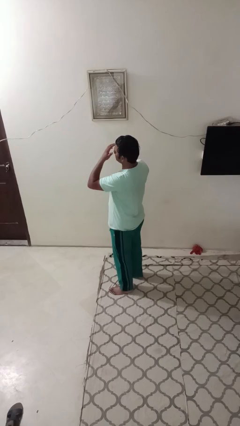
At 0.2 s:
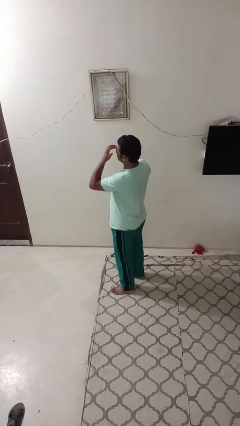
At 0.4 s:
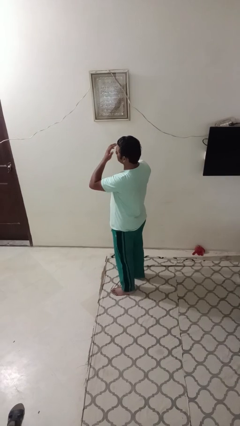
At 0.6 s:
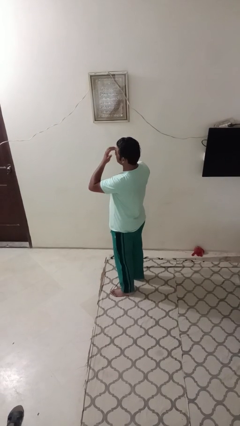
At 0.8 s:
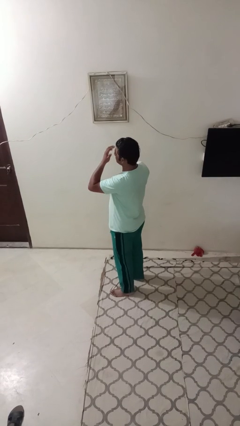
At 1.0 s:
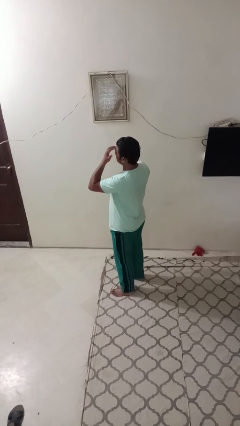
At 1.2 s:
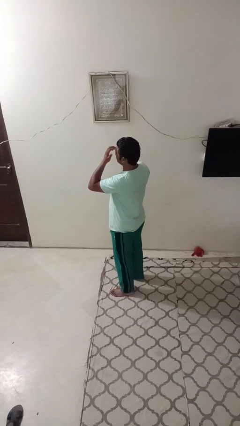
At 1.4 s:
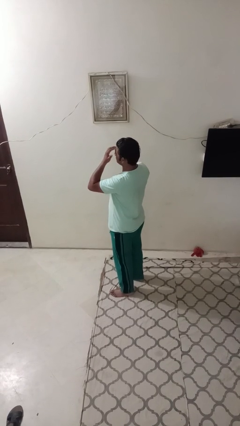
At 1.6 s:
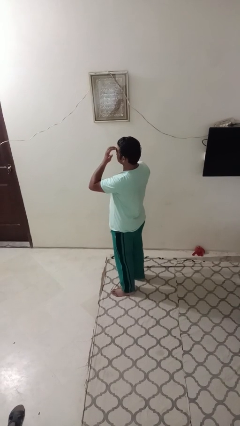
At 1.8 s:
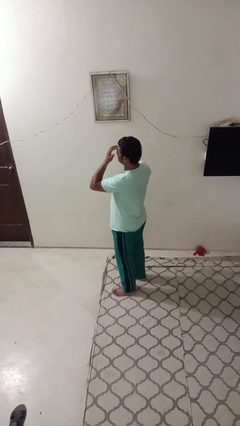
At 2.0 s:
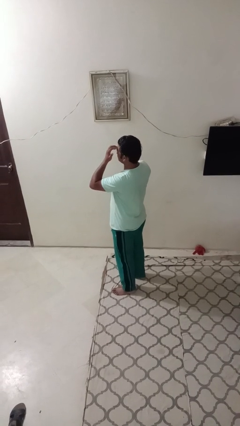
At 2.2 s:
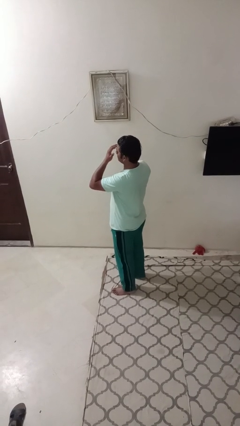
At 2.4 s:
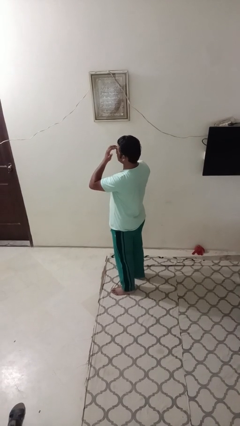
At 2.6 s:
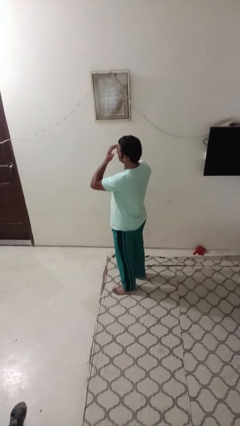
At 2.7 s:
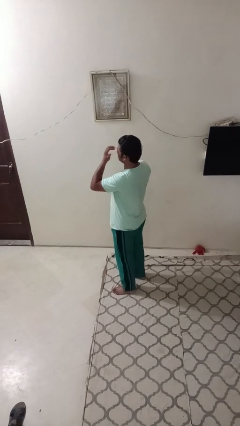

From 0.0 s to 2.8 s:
person scratches face

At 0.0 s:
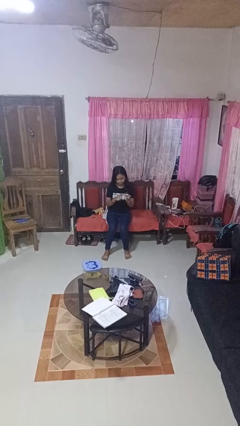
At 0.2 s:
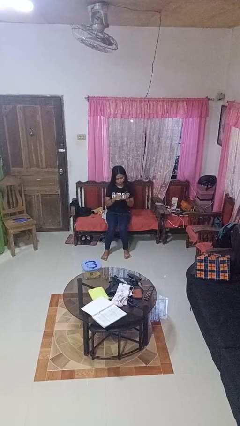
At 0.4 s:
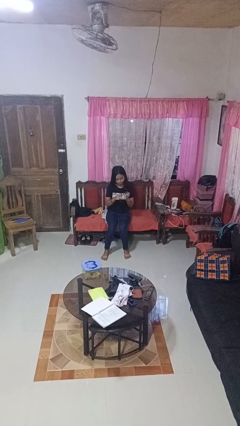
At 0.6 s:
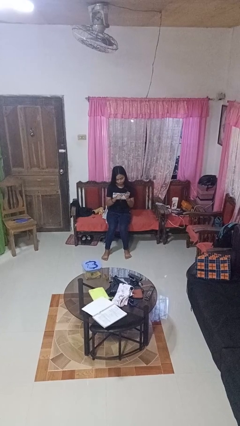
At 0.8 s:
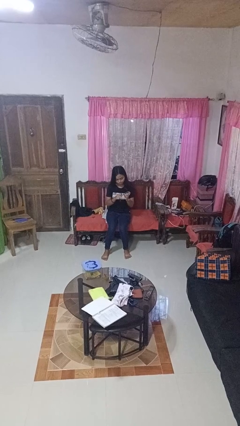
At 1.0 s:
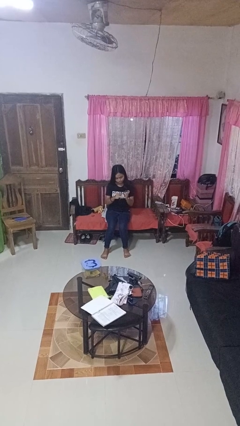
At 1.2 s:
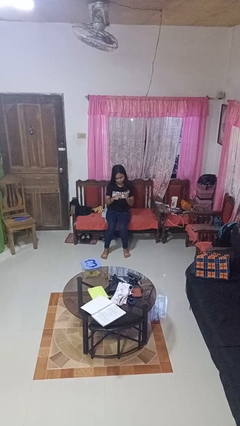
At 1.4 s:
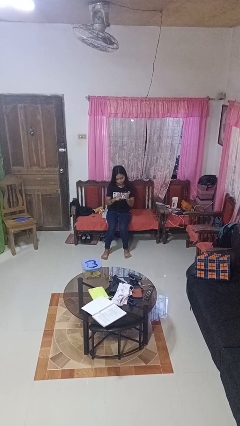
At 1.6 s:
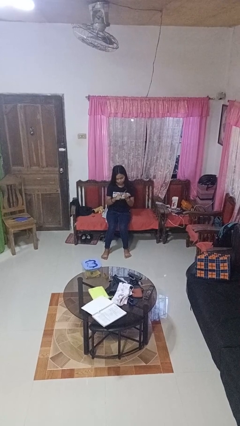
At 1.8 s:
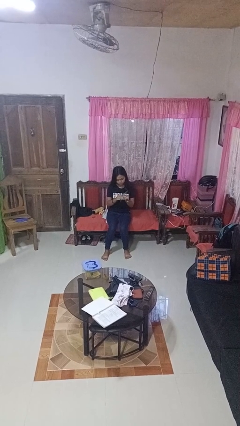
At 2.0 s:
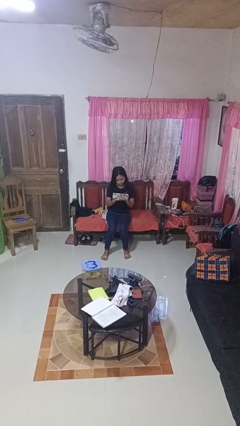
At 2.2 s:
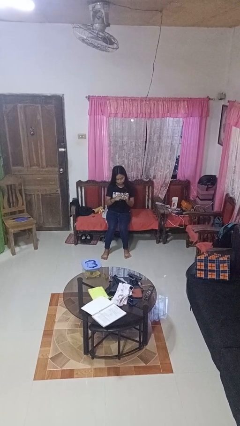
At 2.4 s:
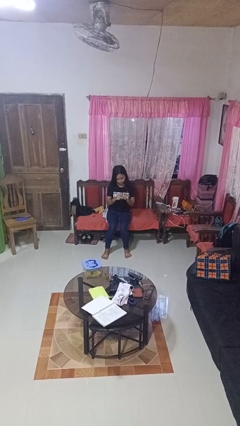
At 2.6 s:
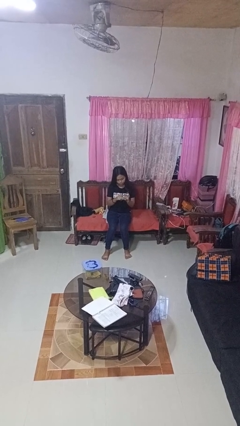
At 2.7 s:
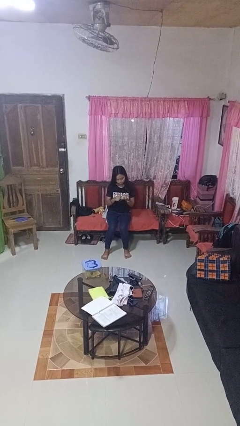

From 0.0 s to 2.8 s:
person files fingernails

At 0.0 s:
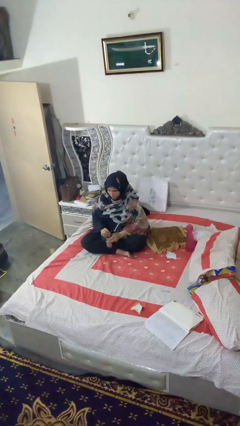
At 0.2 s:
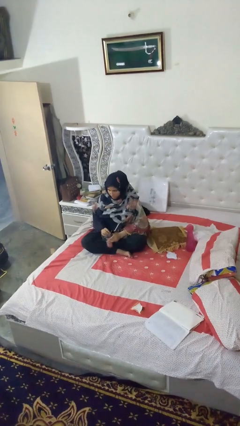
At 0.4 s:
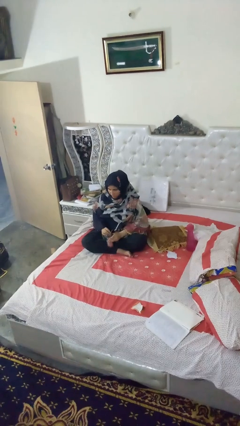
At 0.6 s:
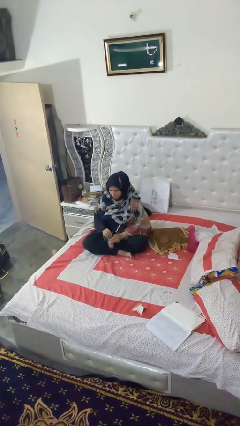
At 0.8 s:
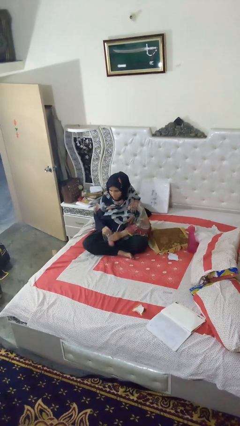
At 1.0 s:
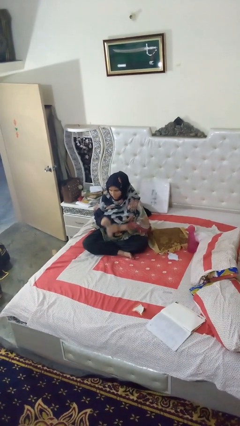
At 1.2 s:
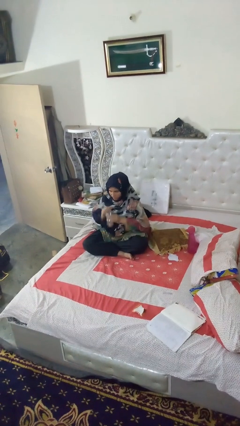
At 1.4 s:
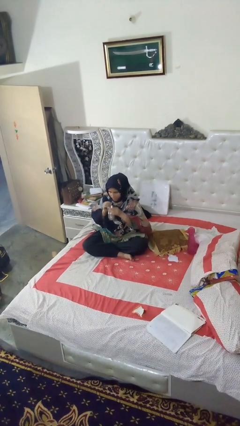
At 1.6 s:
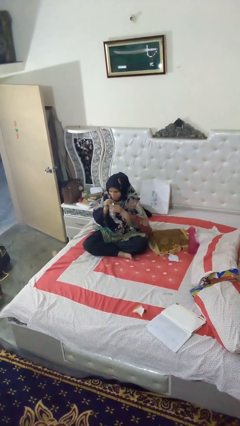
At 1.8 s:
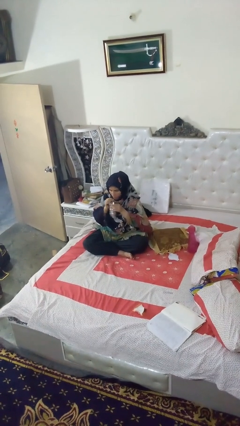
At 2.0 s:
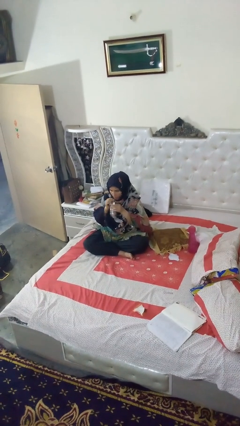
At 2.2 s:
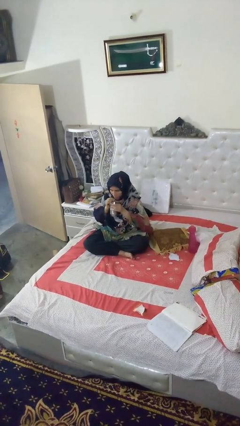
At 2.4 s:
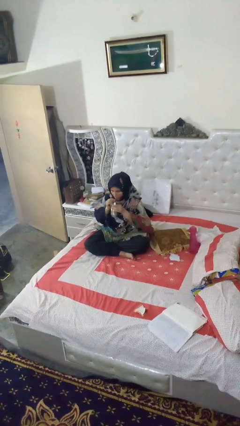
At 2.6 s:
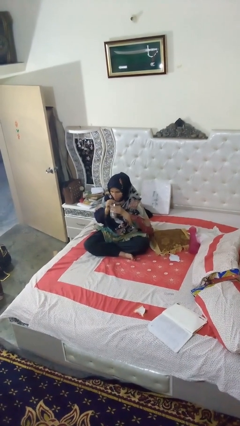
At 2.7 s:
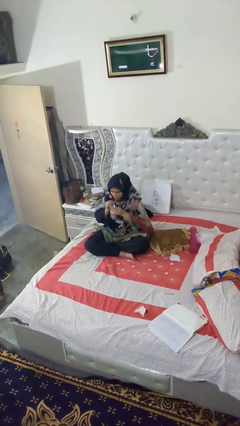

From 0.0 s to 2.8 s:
person drinks from straw

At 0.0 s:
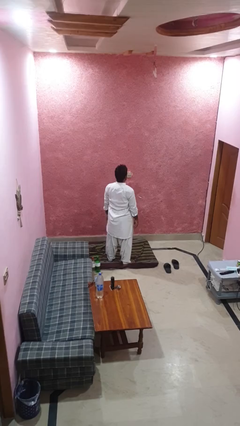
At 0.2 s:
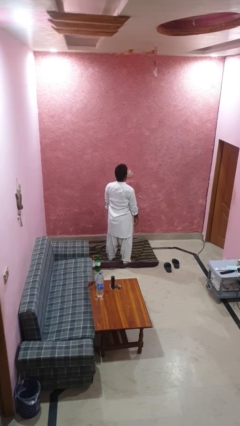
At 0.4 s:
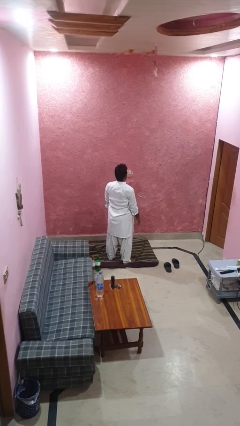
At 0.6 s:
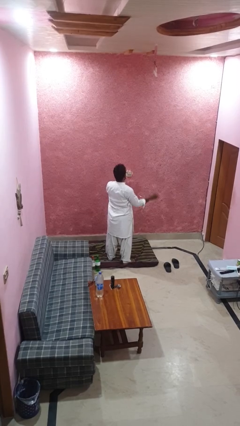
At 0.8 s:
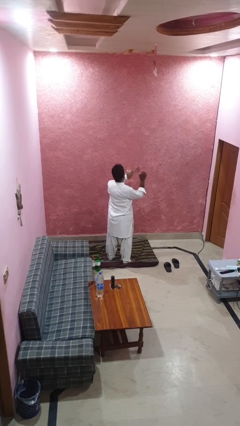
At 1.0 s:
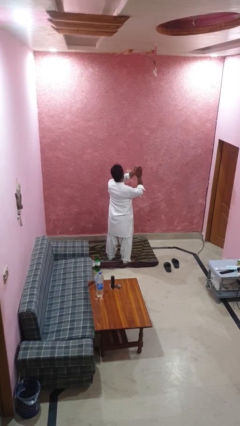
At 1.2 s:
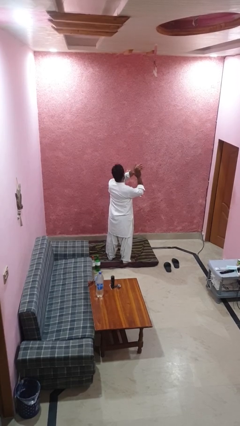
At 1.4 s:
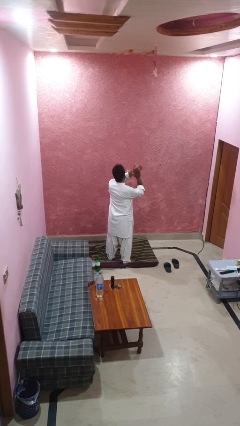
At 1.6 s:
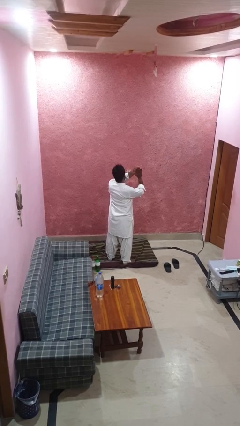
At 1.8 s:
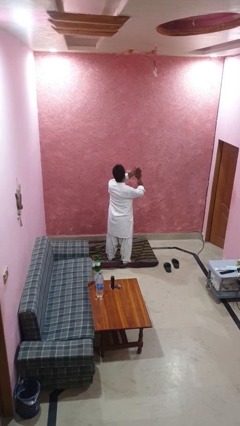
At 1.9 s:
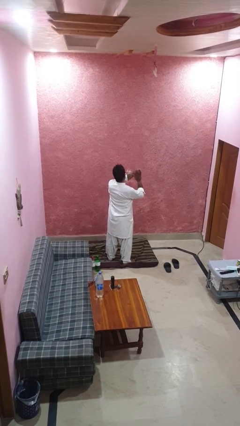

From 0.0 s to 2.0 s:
person claps hands

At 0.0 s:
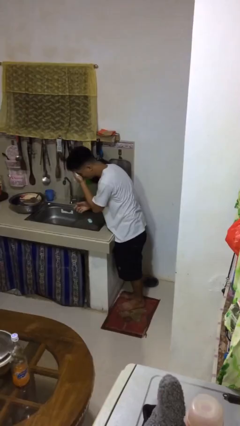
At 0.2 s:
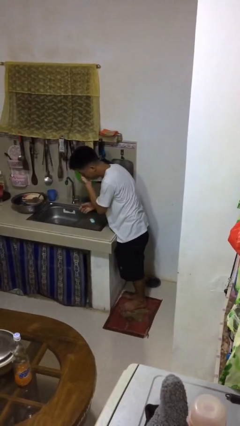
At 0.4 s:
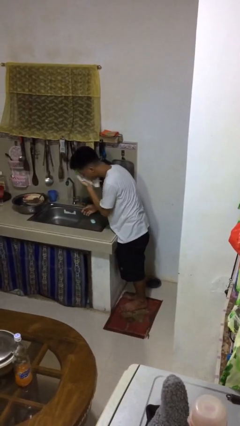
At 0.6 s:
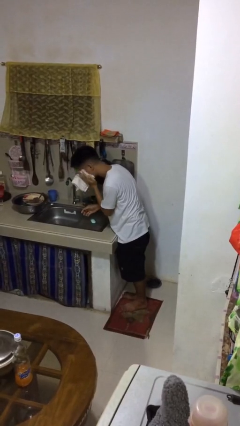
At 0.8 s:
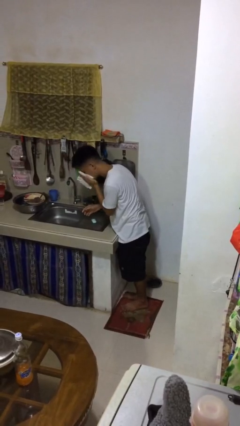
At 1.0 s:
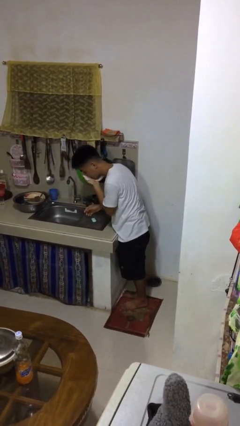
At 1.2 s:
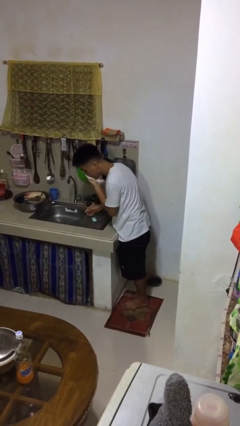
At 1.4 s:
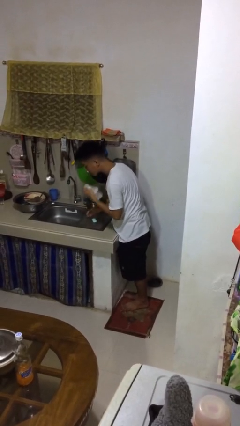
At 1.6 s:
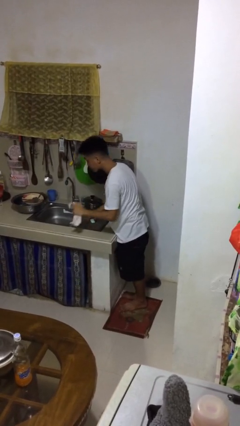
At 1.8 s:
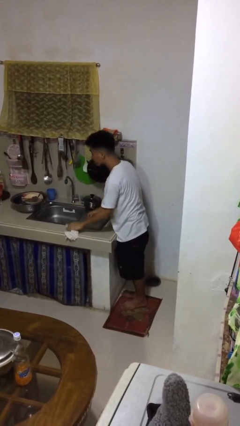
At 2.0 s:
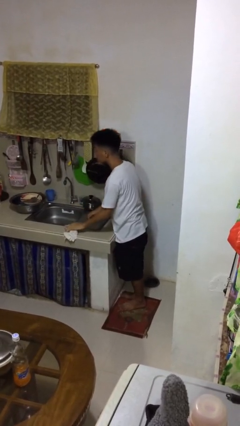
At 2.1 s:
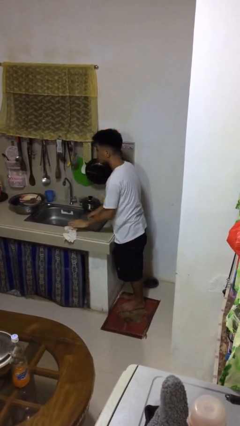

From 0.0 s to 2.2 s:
person dries face with towel

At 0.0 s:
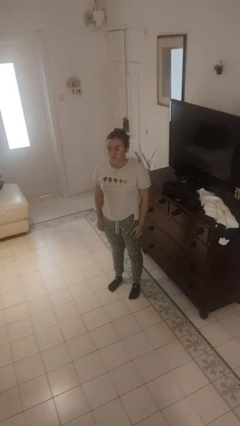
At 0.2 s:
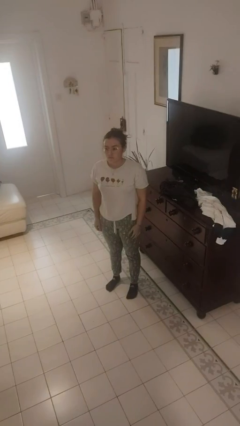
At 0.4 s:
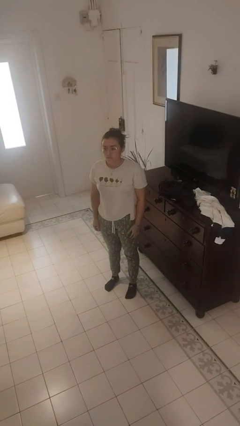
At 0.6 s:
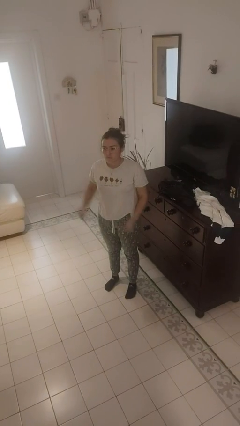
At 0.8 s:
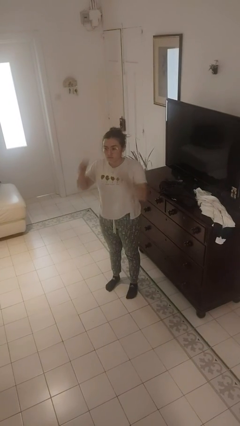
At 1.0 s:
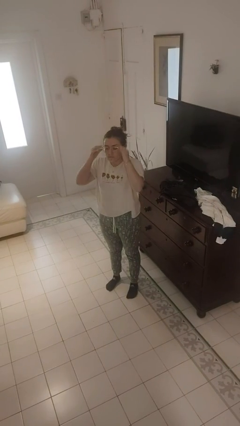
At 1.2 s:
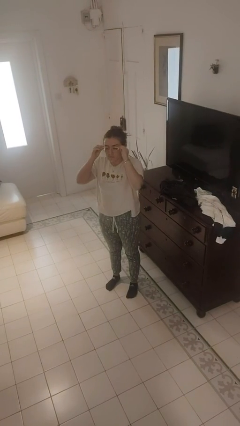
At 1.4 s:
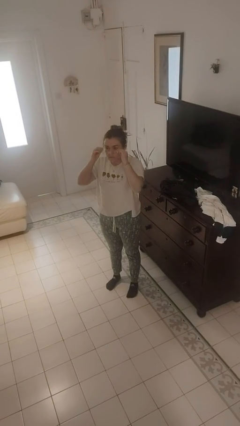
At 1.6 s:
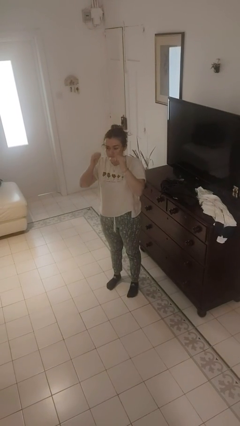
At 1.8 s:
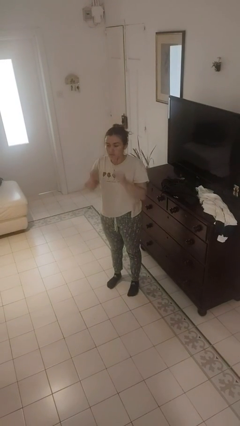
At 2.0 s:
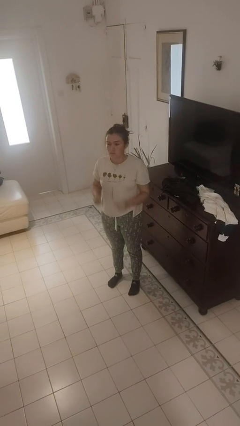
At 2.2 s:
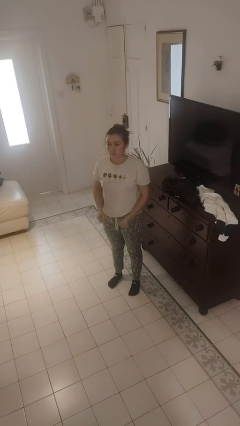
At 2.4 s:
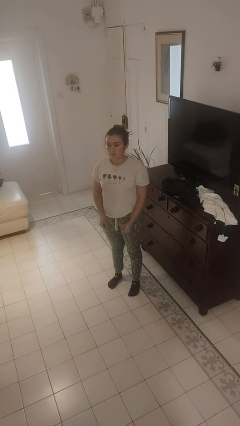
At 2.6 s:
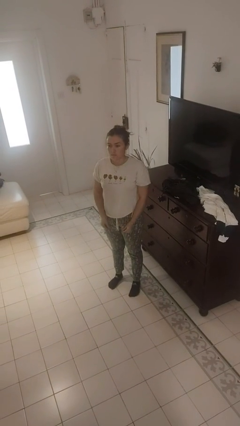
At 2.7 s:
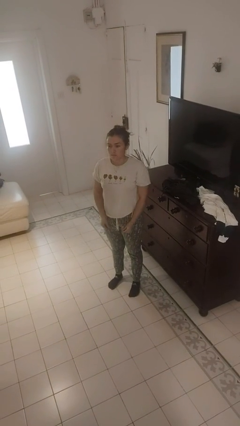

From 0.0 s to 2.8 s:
person takes off glasses

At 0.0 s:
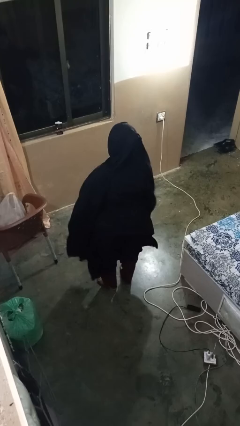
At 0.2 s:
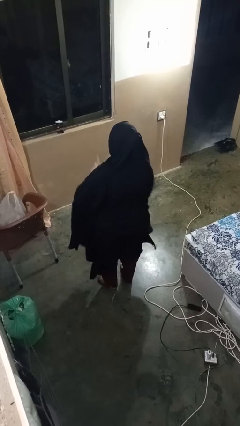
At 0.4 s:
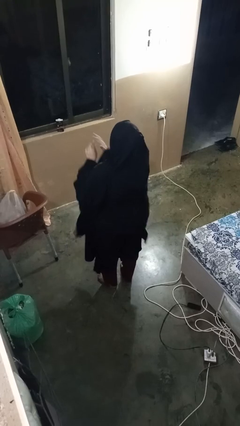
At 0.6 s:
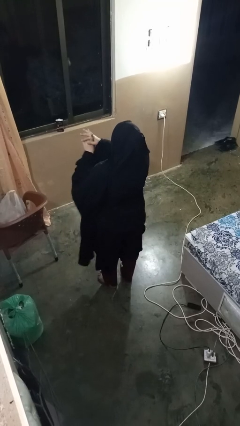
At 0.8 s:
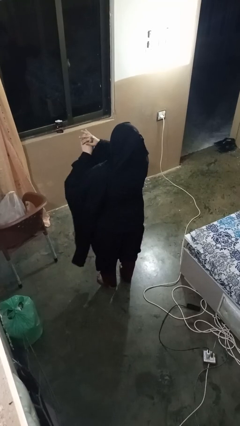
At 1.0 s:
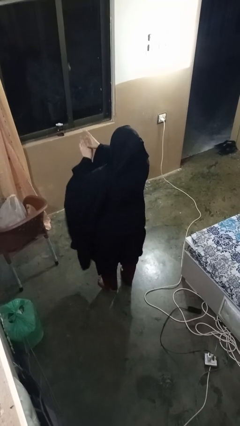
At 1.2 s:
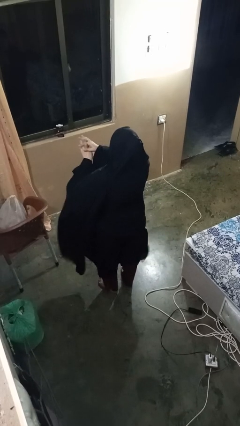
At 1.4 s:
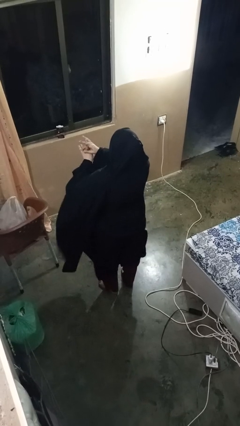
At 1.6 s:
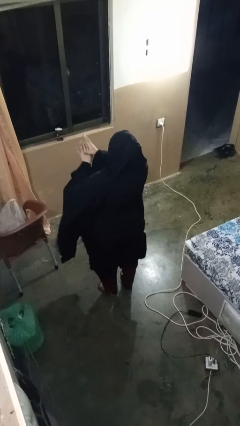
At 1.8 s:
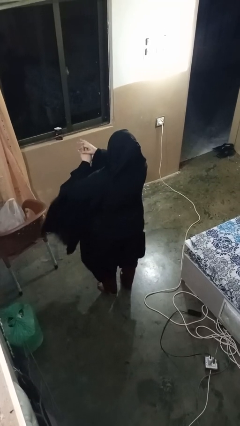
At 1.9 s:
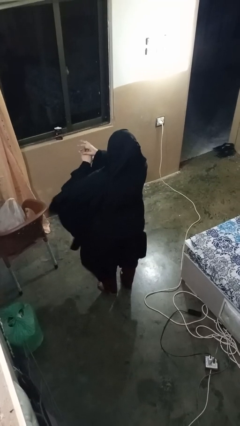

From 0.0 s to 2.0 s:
person cracks knuckles
